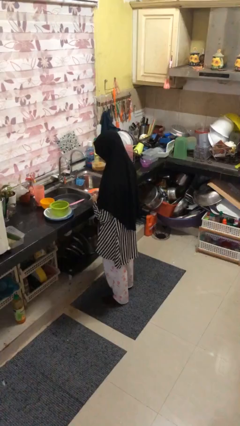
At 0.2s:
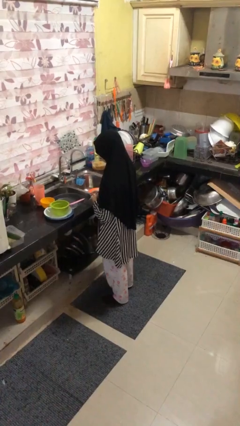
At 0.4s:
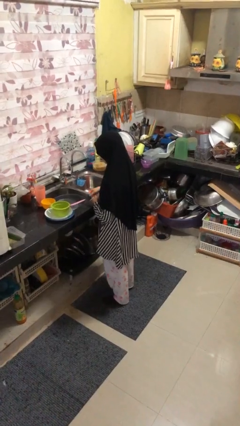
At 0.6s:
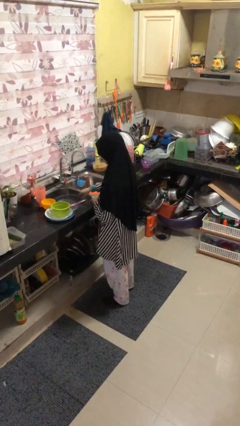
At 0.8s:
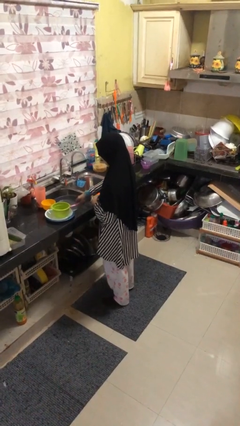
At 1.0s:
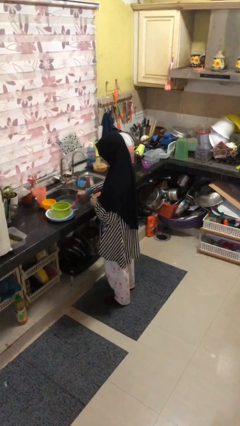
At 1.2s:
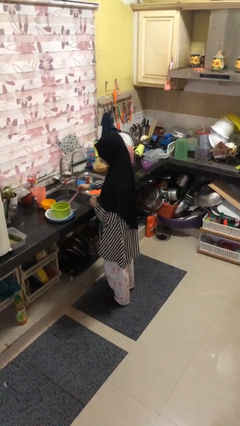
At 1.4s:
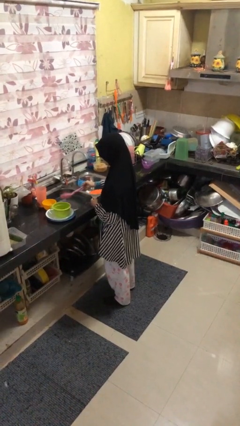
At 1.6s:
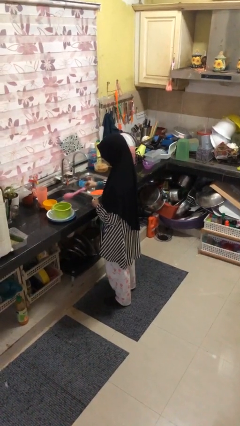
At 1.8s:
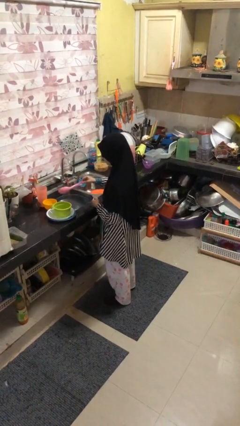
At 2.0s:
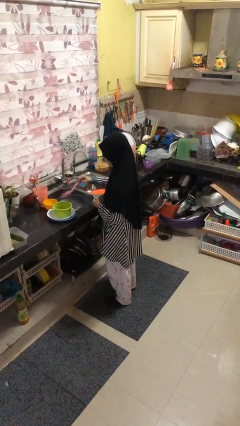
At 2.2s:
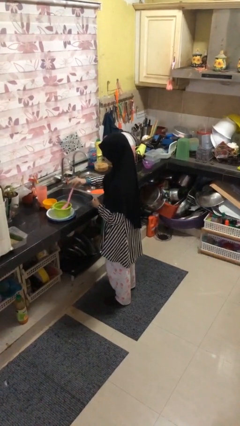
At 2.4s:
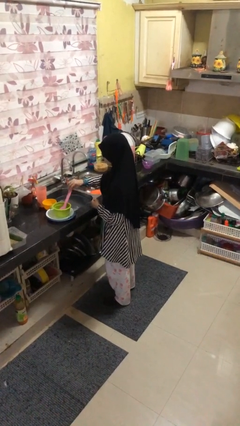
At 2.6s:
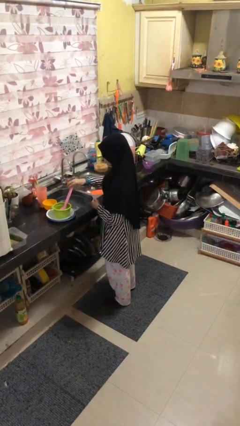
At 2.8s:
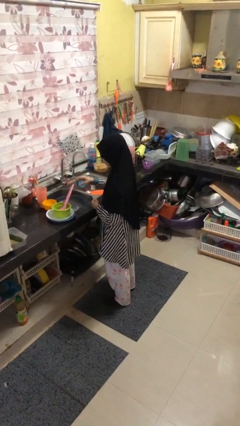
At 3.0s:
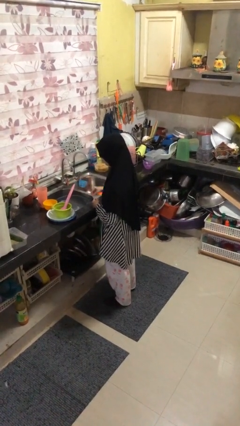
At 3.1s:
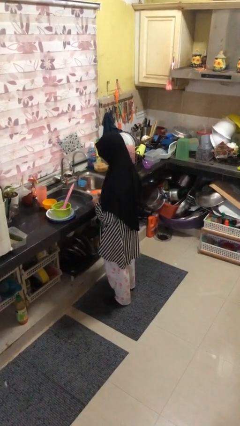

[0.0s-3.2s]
person unloads dishwasher

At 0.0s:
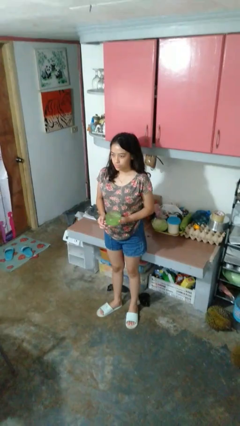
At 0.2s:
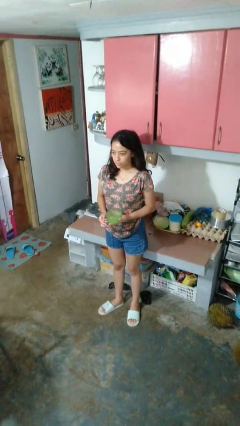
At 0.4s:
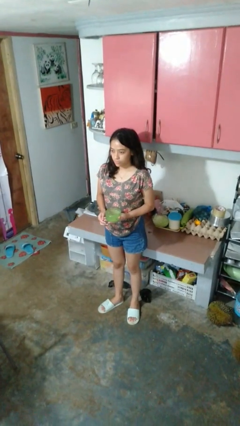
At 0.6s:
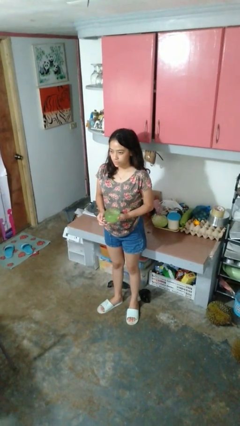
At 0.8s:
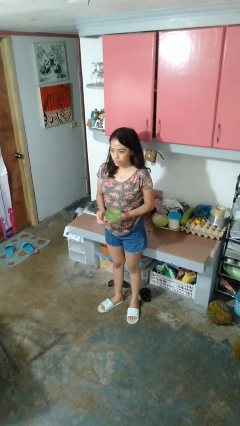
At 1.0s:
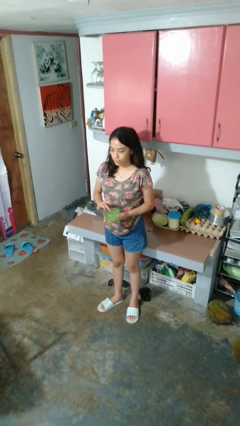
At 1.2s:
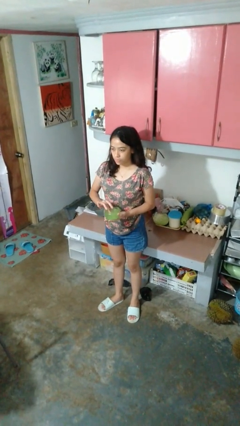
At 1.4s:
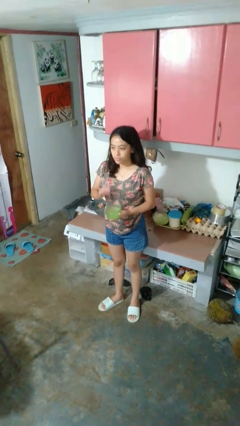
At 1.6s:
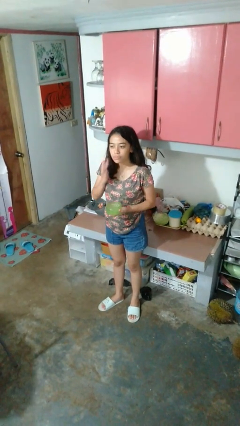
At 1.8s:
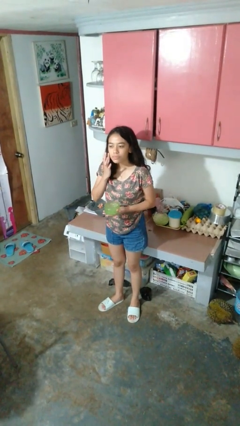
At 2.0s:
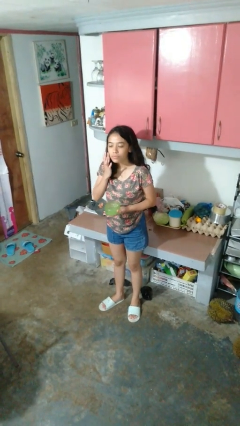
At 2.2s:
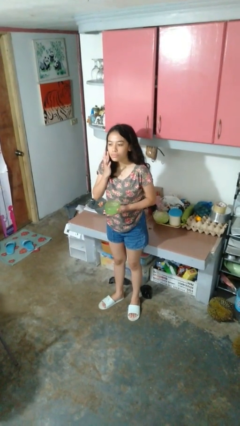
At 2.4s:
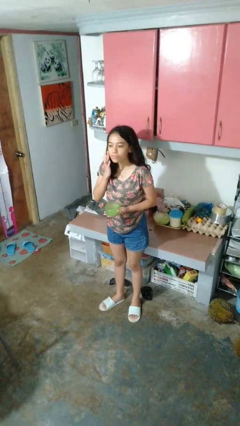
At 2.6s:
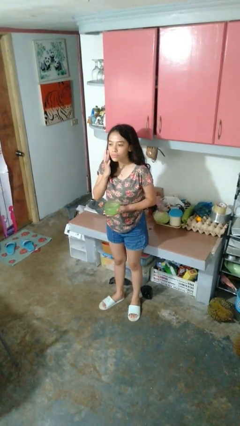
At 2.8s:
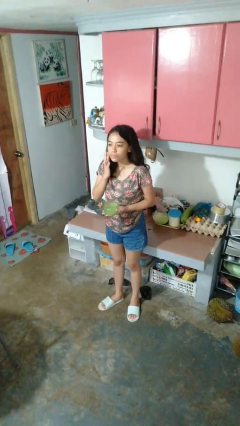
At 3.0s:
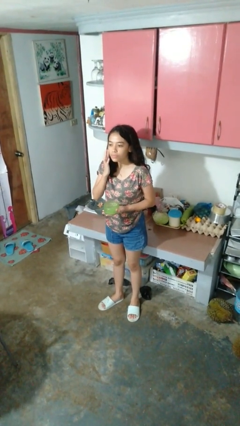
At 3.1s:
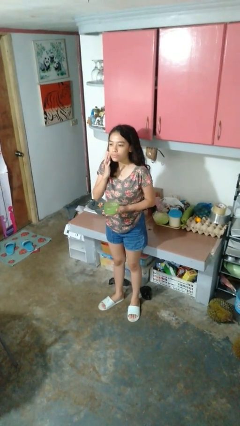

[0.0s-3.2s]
person applies facial moisturizer

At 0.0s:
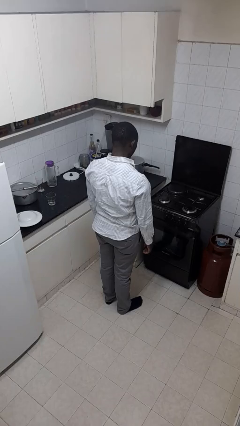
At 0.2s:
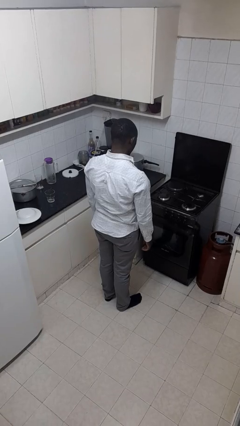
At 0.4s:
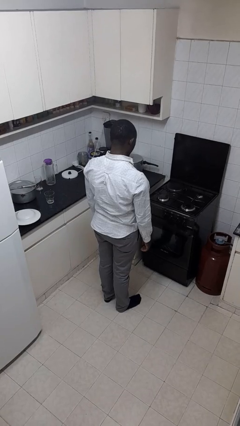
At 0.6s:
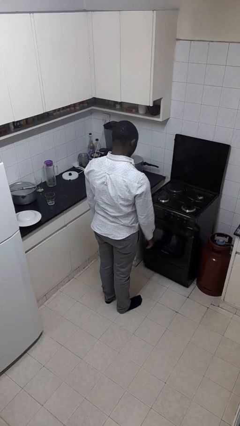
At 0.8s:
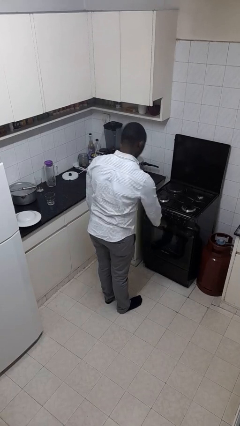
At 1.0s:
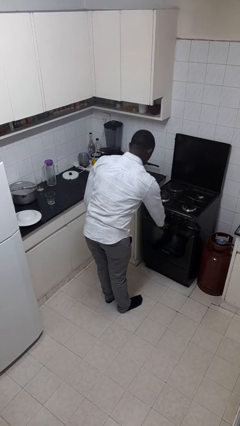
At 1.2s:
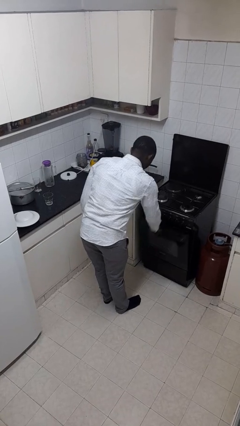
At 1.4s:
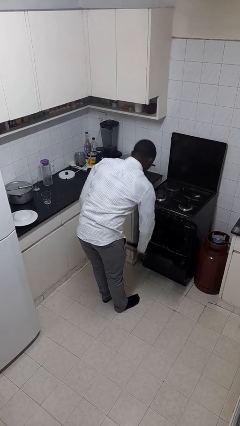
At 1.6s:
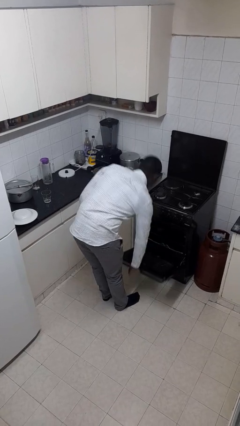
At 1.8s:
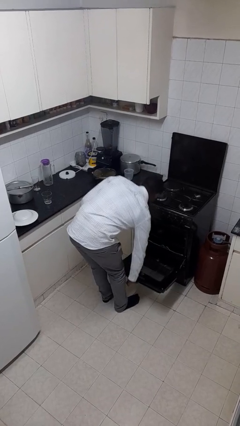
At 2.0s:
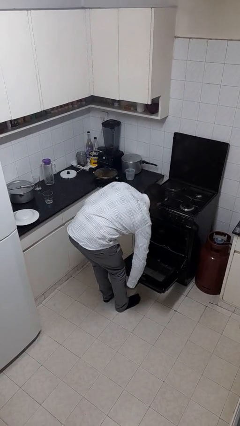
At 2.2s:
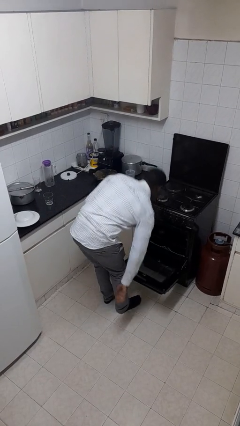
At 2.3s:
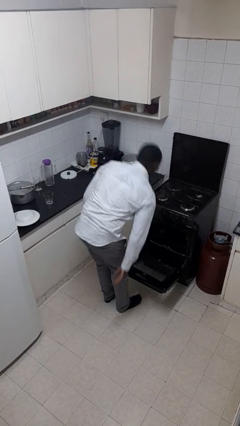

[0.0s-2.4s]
person opens oven door

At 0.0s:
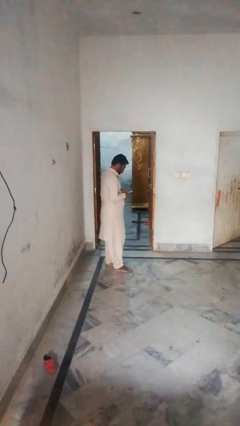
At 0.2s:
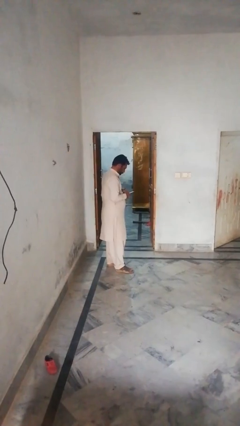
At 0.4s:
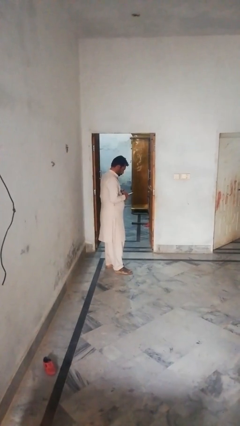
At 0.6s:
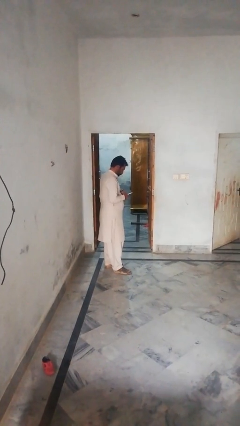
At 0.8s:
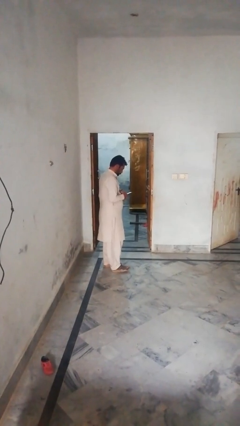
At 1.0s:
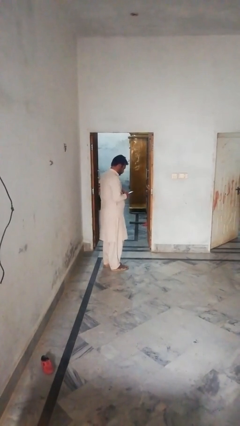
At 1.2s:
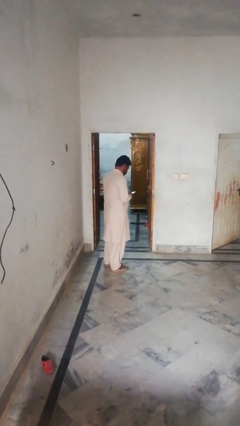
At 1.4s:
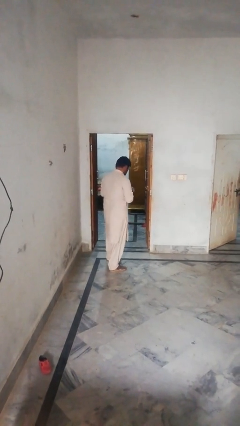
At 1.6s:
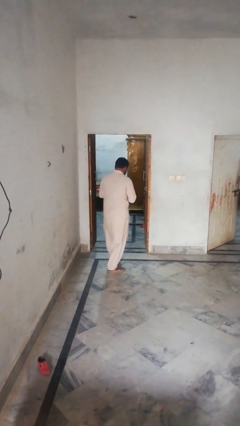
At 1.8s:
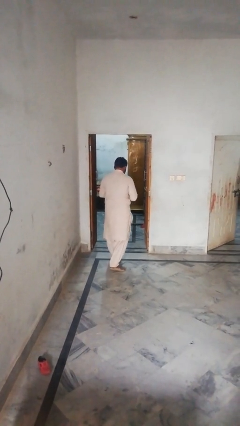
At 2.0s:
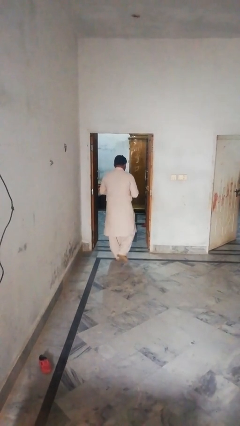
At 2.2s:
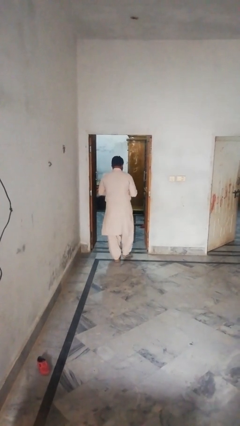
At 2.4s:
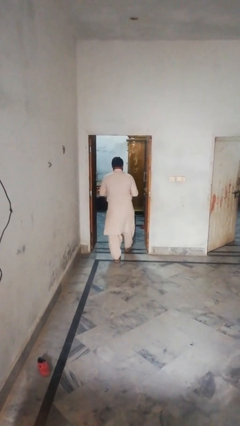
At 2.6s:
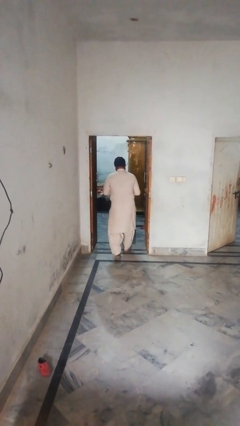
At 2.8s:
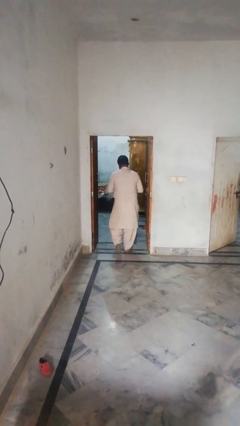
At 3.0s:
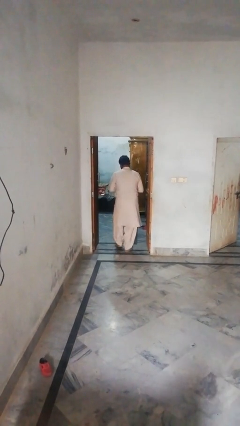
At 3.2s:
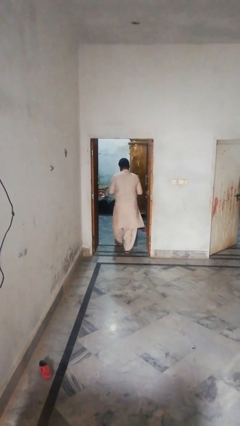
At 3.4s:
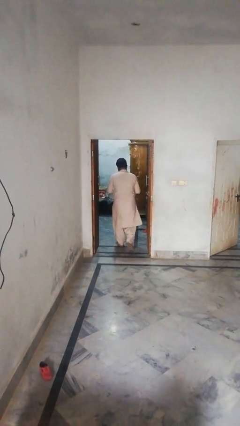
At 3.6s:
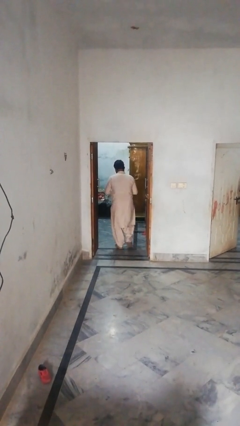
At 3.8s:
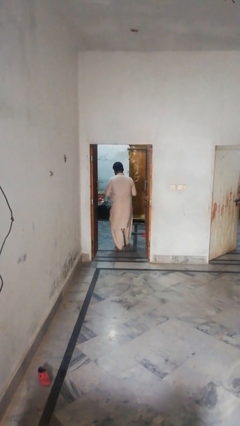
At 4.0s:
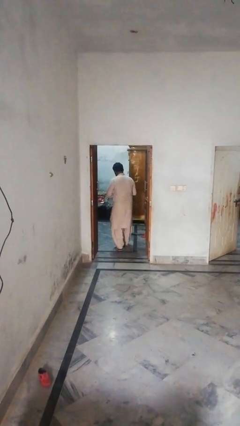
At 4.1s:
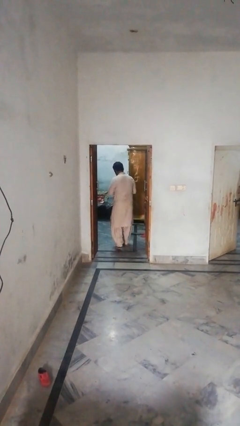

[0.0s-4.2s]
person enters scene through structure

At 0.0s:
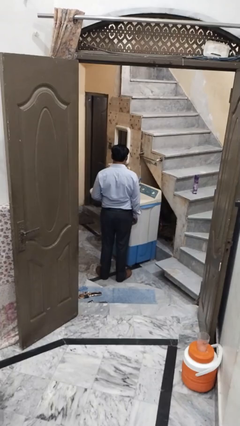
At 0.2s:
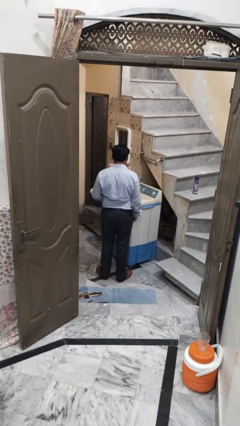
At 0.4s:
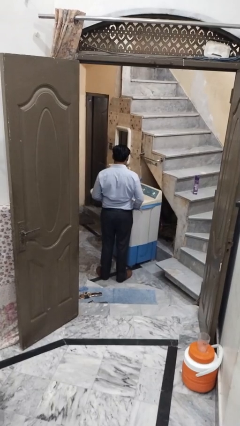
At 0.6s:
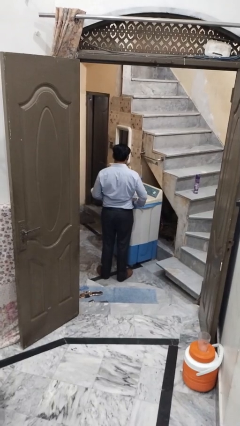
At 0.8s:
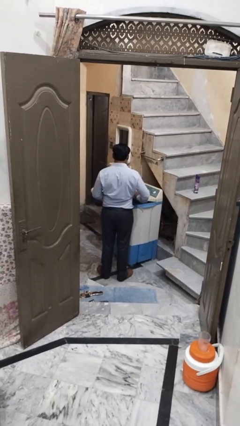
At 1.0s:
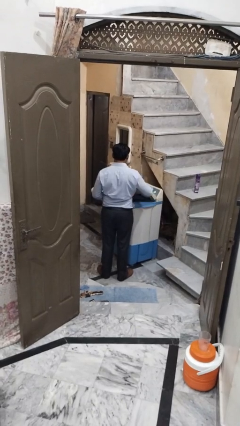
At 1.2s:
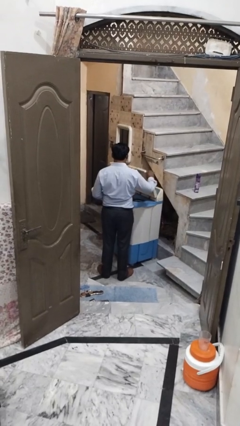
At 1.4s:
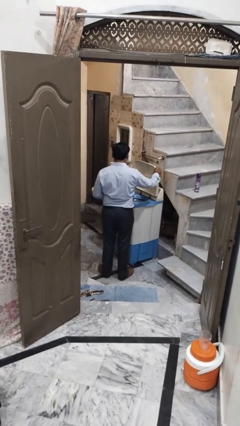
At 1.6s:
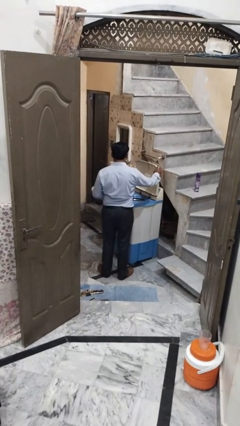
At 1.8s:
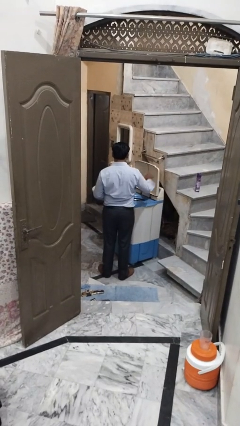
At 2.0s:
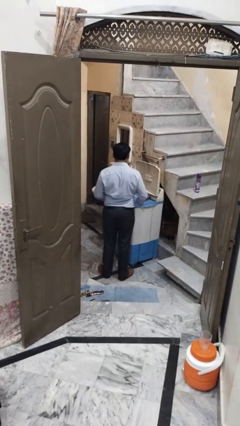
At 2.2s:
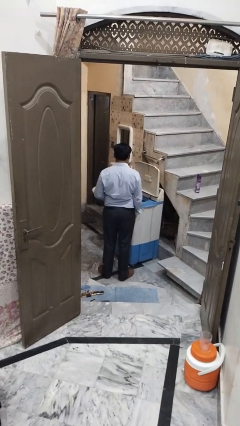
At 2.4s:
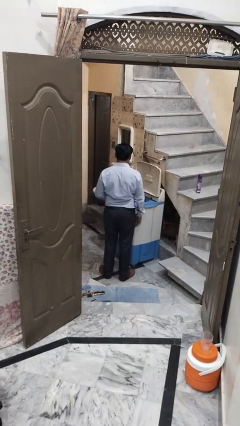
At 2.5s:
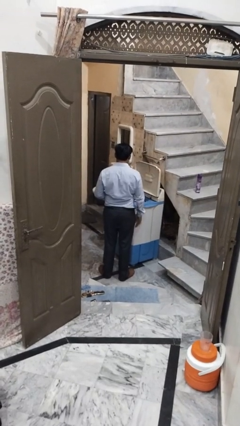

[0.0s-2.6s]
person opens clothes washer

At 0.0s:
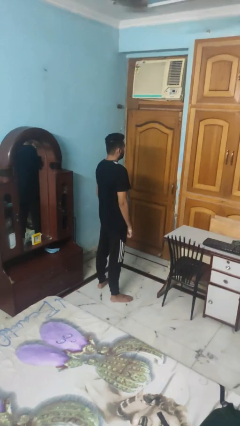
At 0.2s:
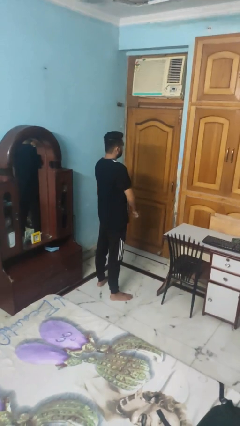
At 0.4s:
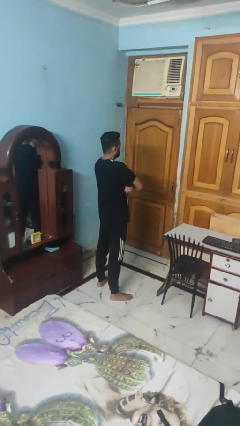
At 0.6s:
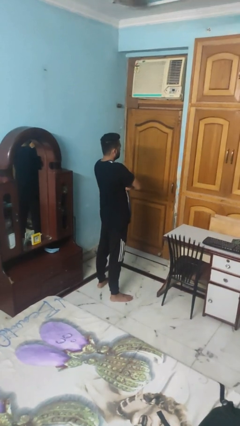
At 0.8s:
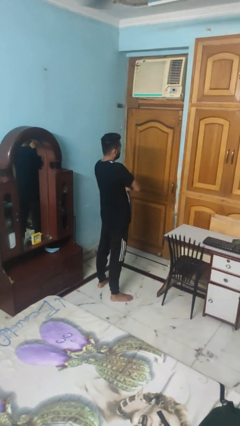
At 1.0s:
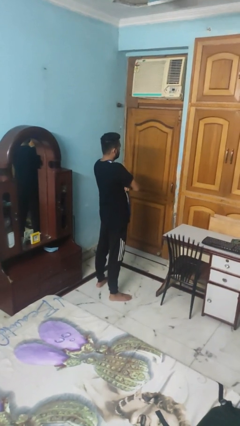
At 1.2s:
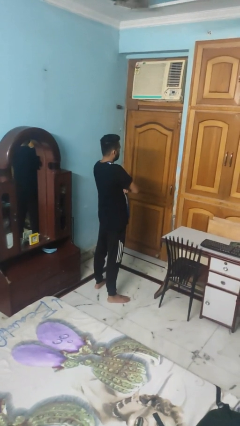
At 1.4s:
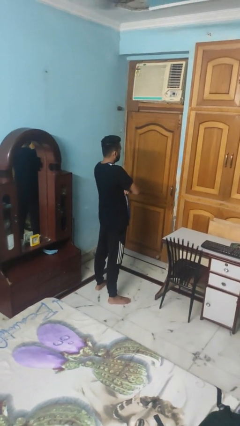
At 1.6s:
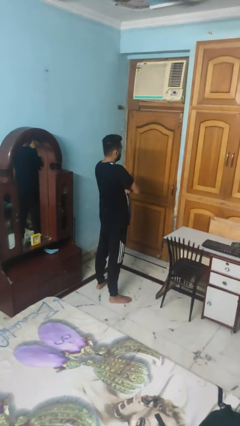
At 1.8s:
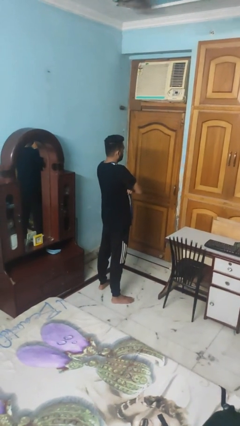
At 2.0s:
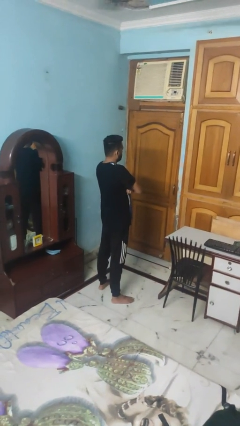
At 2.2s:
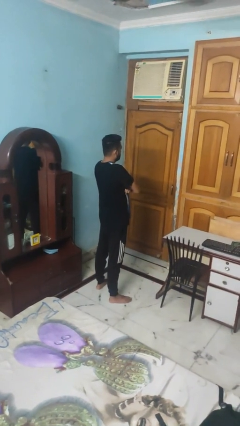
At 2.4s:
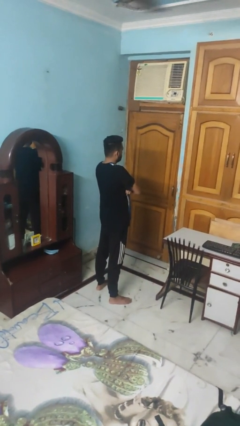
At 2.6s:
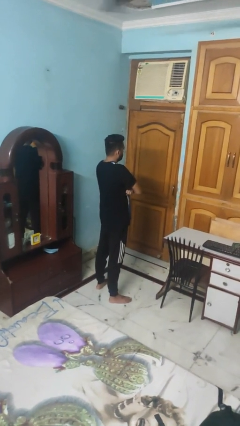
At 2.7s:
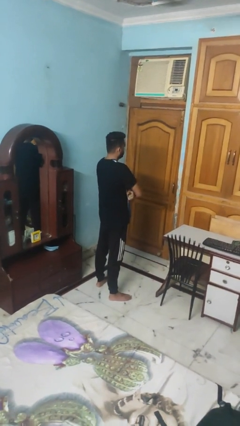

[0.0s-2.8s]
person crosses arms
